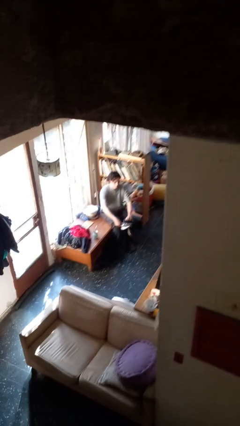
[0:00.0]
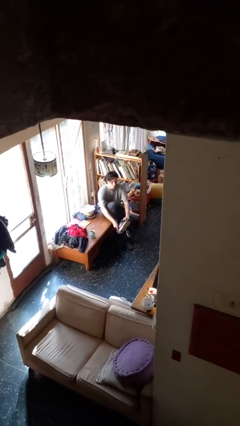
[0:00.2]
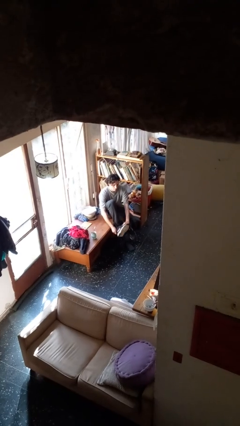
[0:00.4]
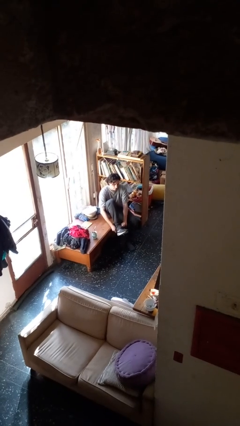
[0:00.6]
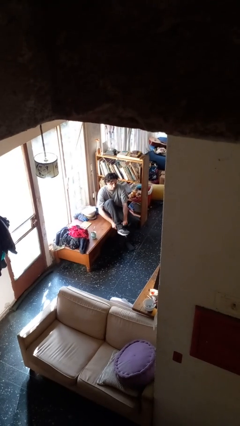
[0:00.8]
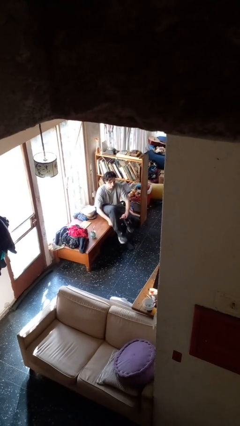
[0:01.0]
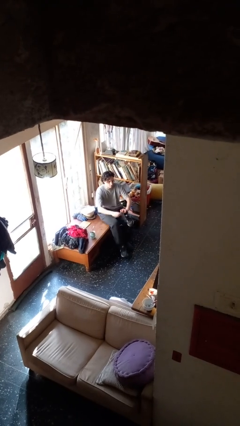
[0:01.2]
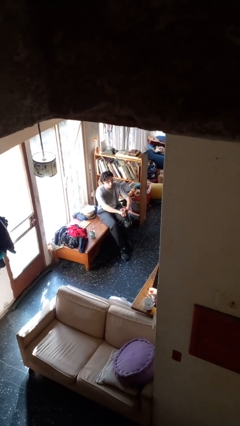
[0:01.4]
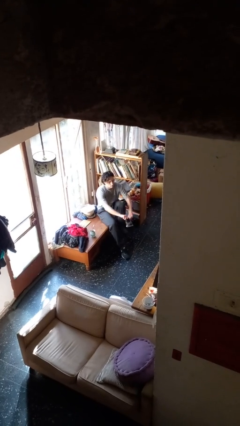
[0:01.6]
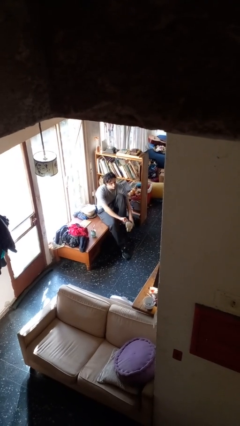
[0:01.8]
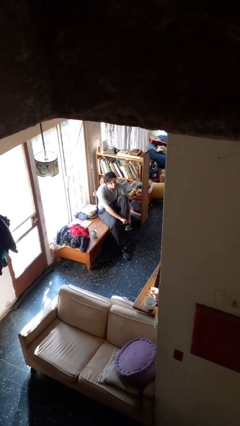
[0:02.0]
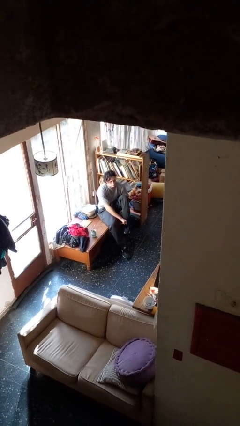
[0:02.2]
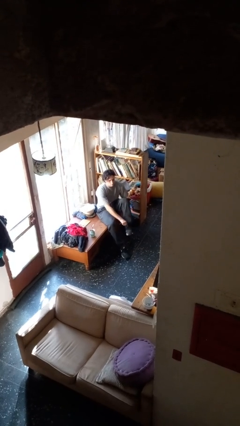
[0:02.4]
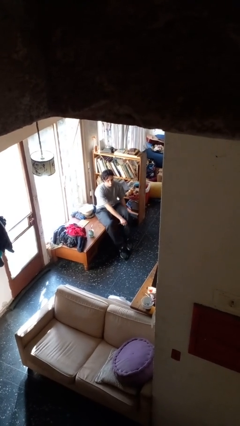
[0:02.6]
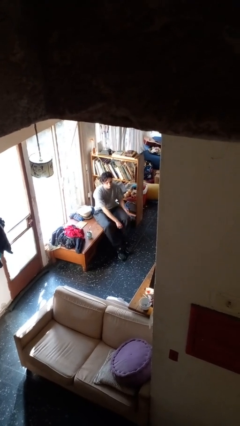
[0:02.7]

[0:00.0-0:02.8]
person puts on shoes

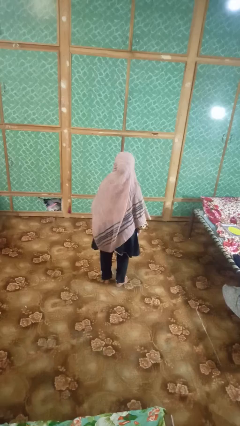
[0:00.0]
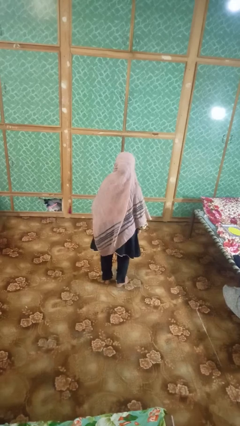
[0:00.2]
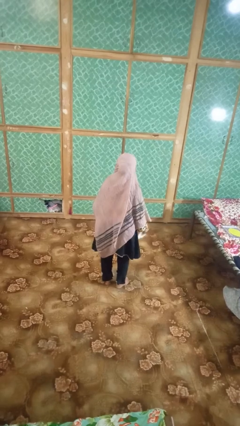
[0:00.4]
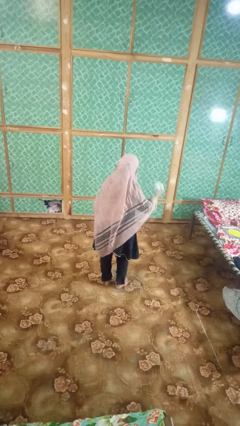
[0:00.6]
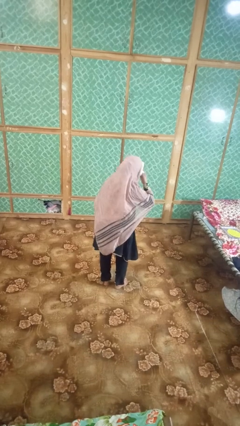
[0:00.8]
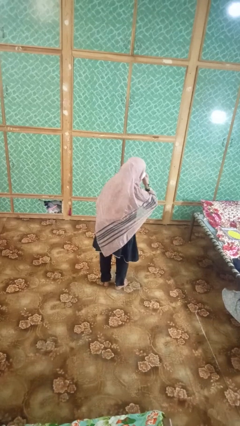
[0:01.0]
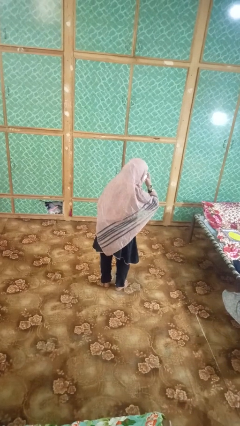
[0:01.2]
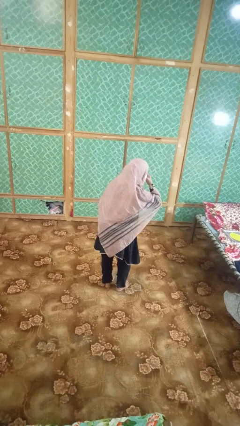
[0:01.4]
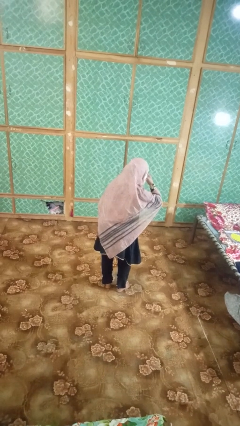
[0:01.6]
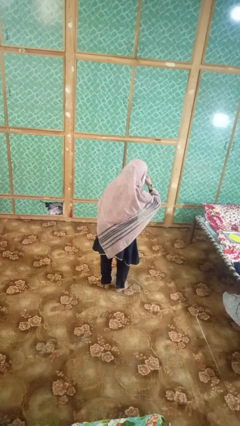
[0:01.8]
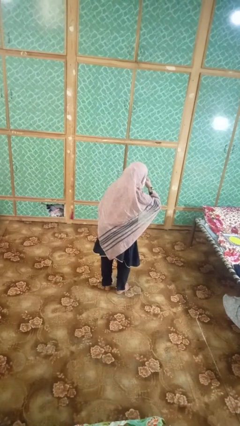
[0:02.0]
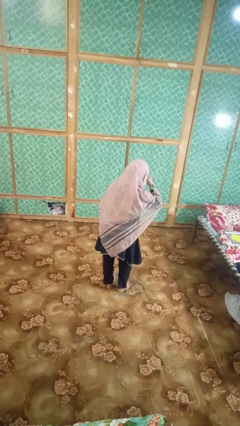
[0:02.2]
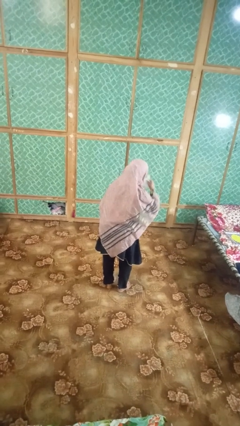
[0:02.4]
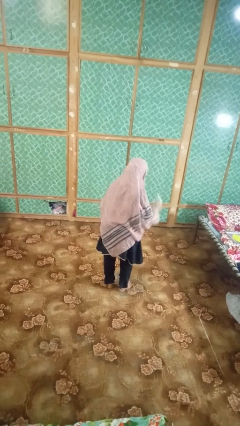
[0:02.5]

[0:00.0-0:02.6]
person blows nose

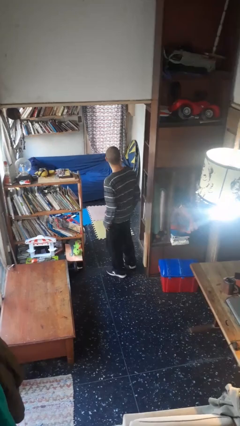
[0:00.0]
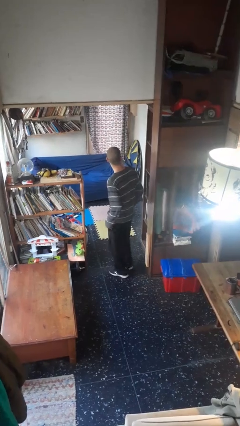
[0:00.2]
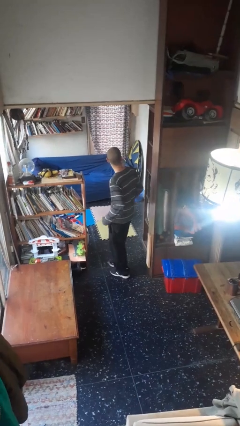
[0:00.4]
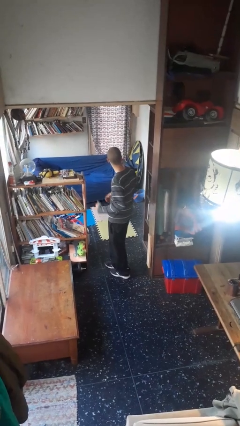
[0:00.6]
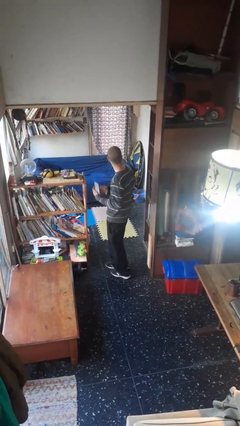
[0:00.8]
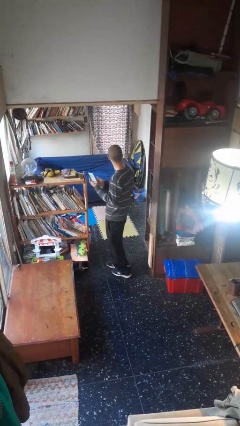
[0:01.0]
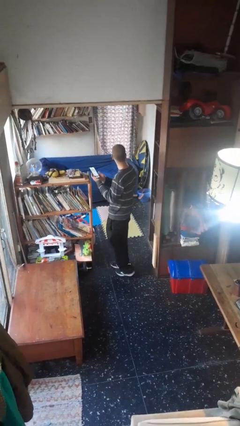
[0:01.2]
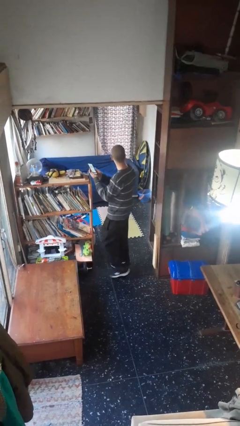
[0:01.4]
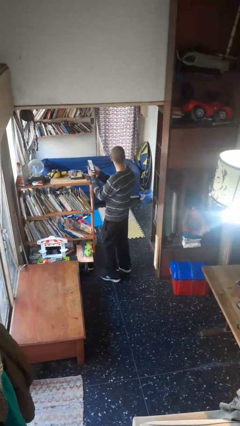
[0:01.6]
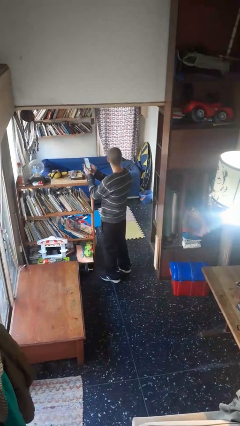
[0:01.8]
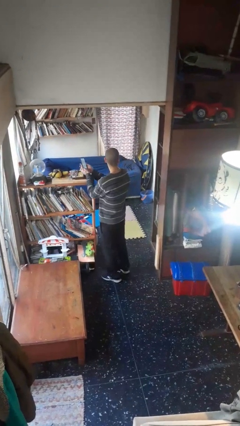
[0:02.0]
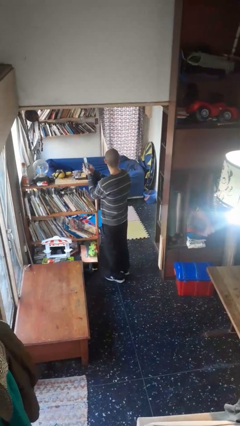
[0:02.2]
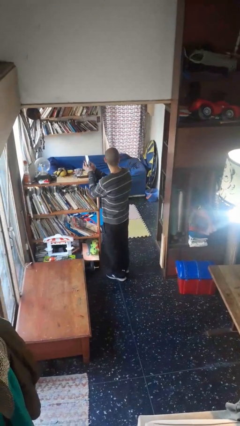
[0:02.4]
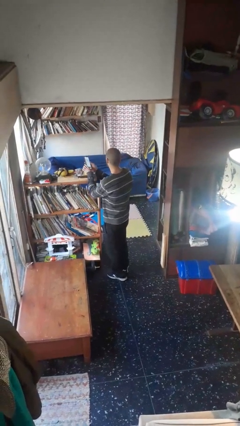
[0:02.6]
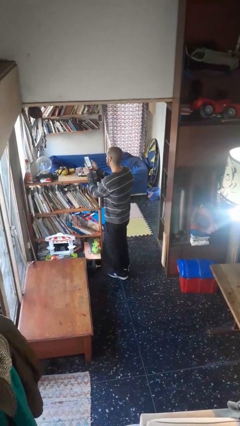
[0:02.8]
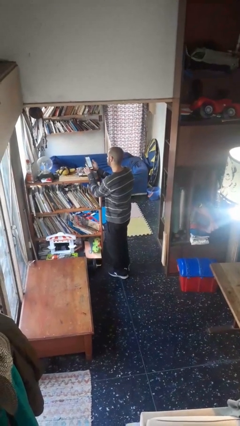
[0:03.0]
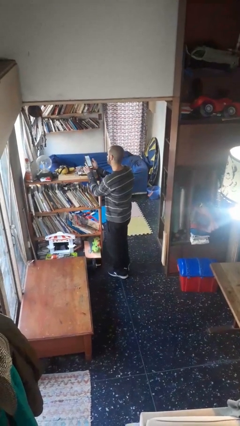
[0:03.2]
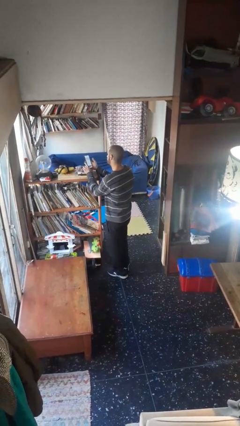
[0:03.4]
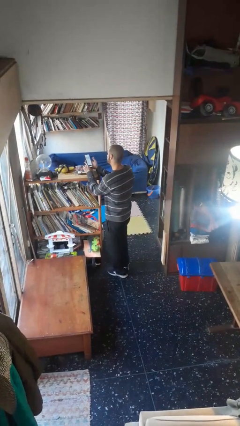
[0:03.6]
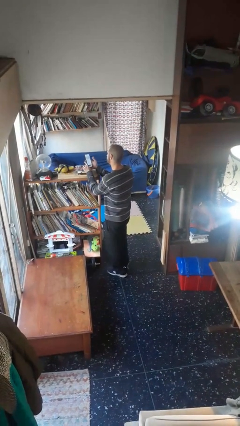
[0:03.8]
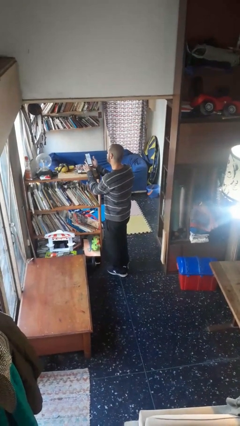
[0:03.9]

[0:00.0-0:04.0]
person takes phone from pocket

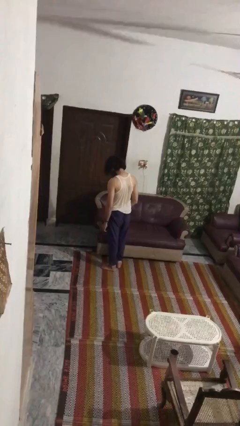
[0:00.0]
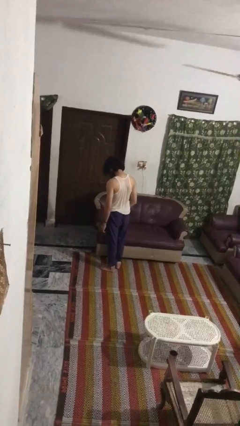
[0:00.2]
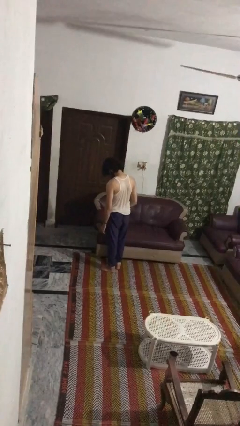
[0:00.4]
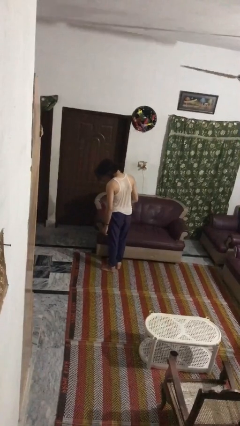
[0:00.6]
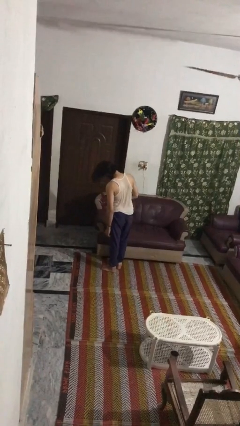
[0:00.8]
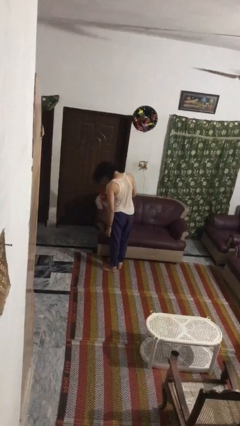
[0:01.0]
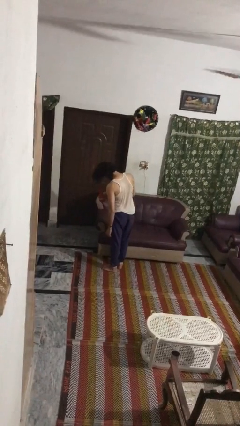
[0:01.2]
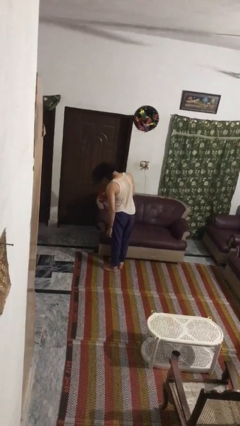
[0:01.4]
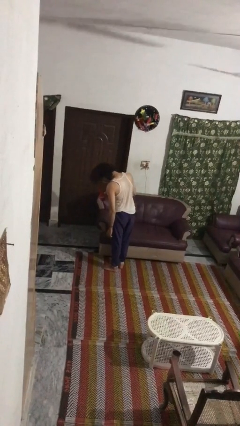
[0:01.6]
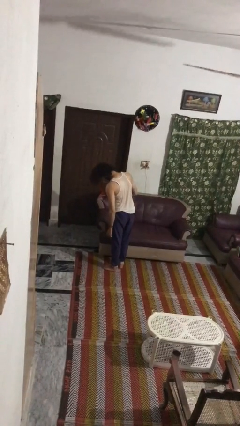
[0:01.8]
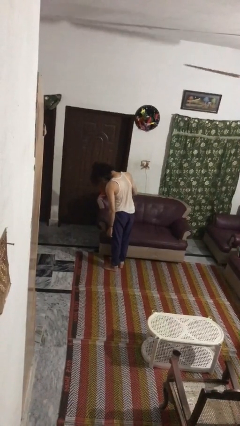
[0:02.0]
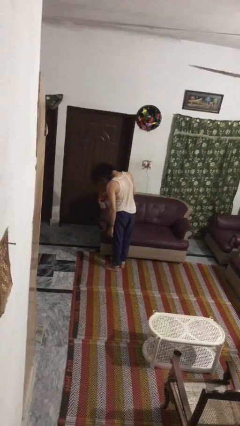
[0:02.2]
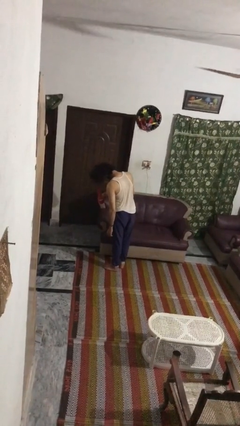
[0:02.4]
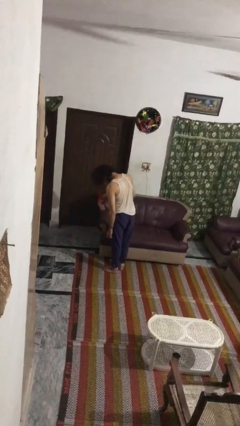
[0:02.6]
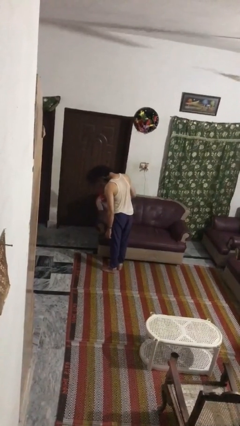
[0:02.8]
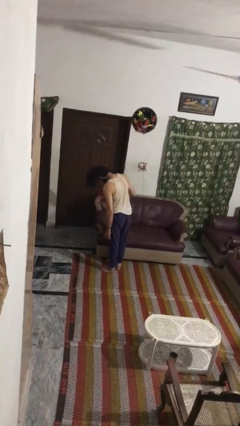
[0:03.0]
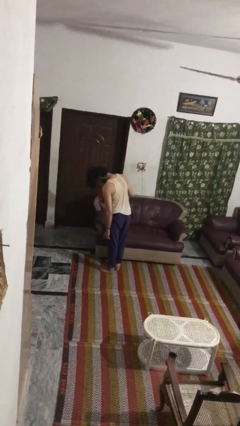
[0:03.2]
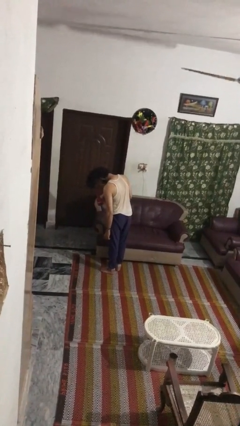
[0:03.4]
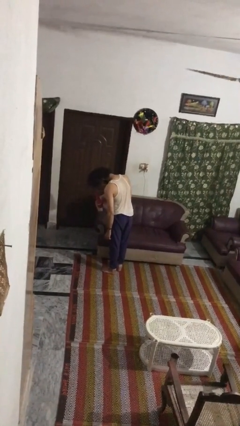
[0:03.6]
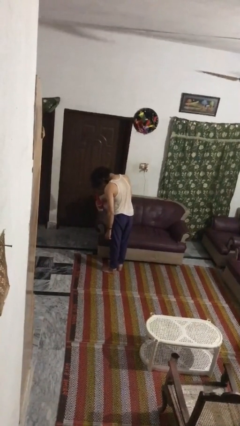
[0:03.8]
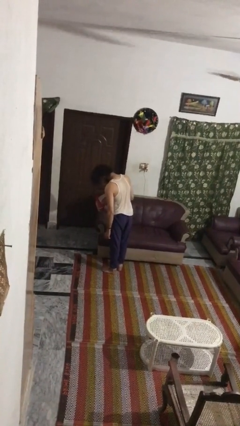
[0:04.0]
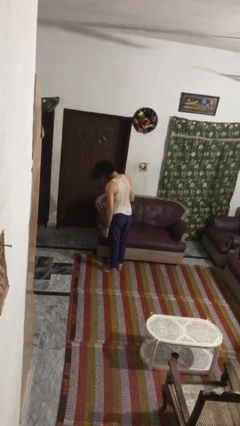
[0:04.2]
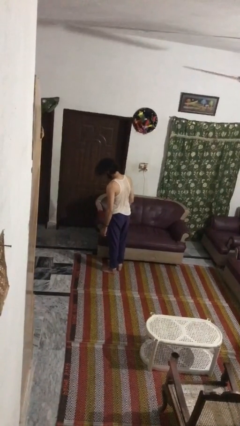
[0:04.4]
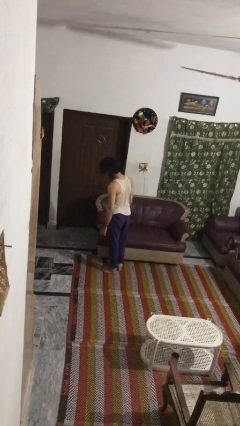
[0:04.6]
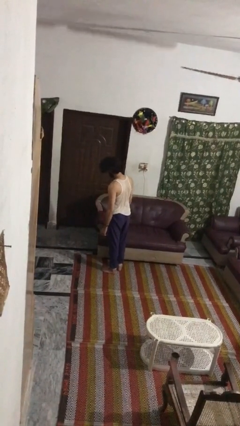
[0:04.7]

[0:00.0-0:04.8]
person dries hair with hairdryer

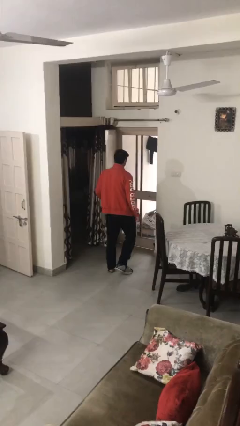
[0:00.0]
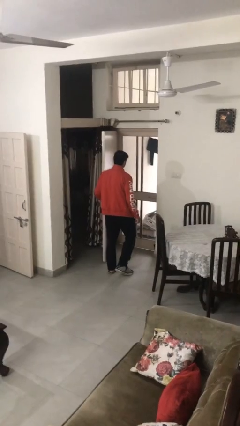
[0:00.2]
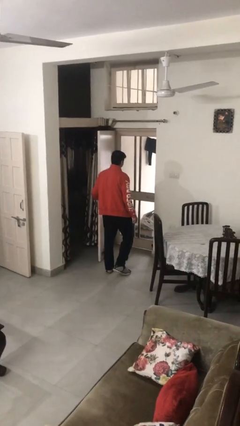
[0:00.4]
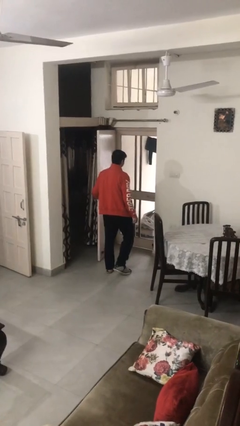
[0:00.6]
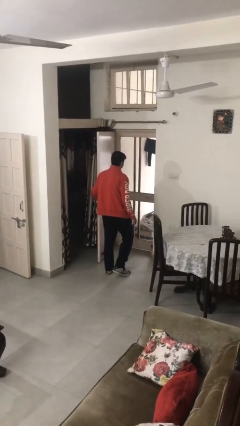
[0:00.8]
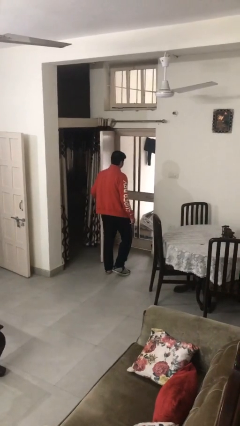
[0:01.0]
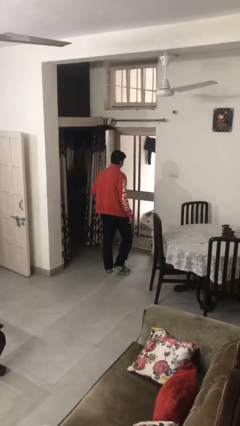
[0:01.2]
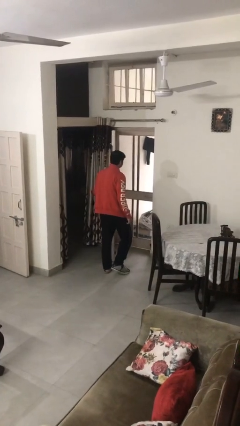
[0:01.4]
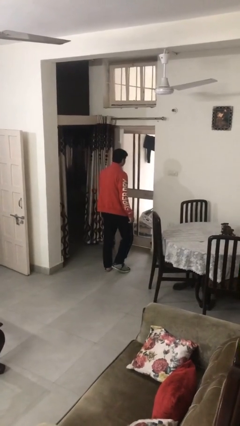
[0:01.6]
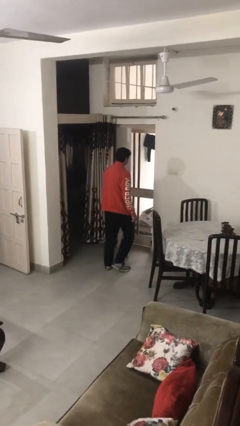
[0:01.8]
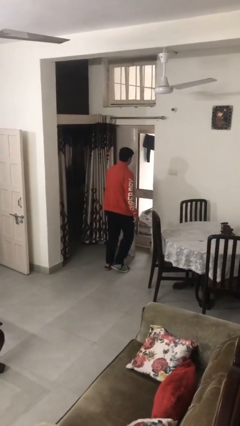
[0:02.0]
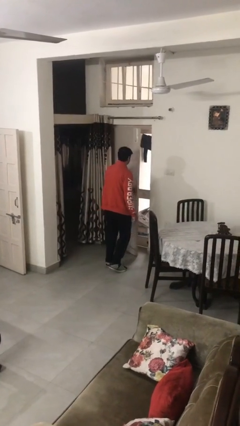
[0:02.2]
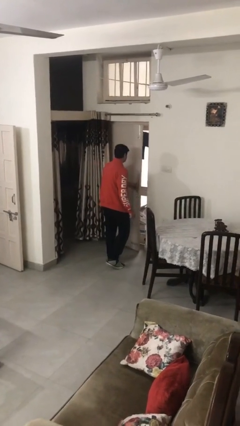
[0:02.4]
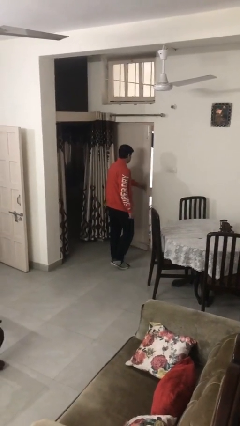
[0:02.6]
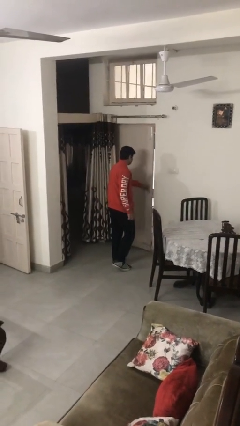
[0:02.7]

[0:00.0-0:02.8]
person closes facility door

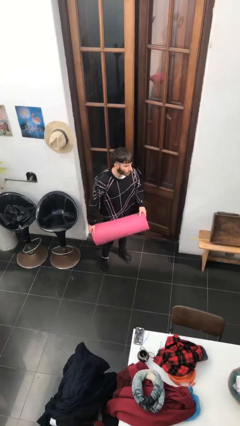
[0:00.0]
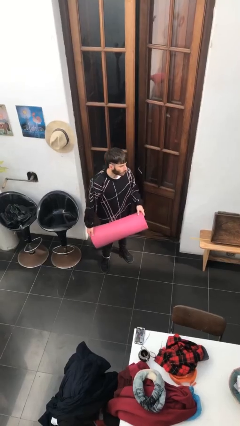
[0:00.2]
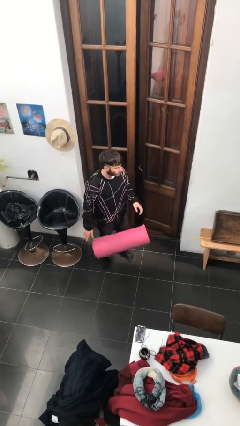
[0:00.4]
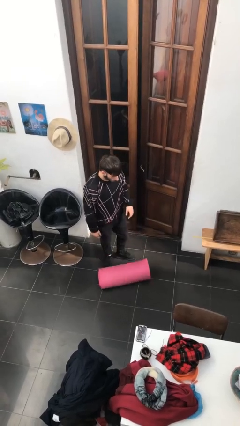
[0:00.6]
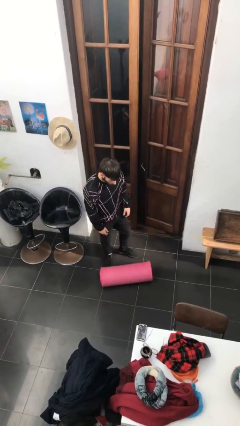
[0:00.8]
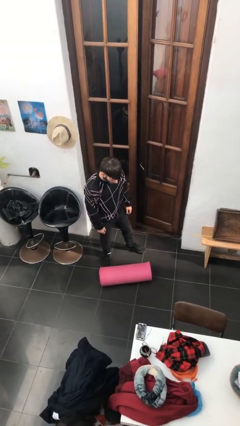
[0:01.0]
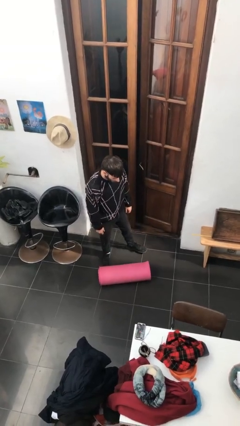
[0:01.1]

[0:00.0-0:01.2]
person drops object
